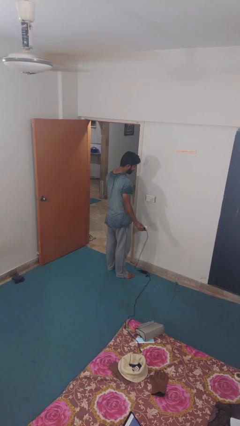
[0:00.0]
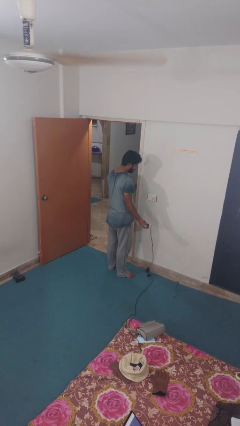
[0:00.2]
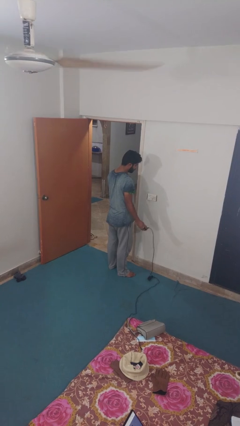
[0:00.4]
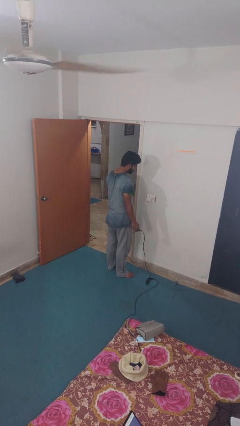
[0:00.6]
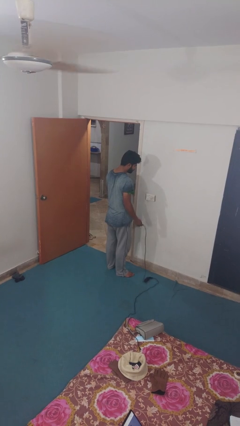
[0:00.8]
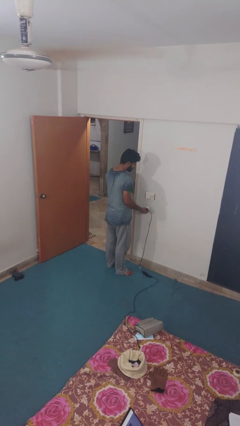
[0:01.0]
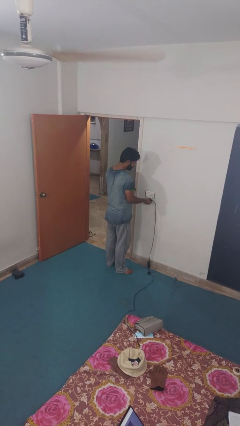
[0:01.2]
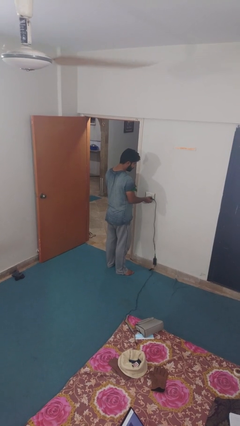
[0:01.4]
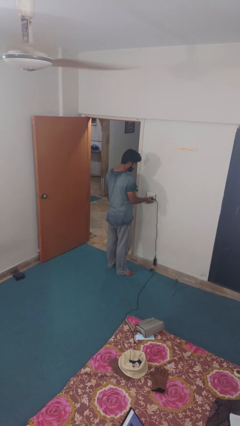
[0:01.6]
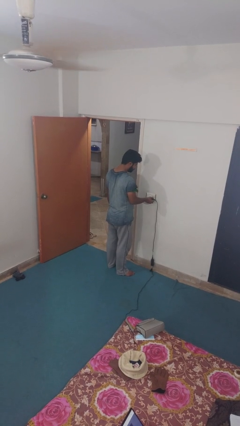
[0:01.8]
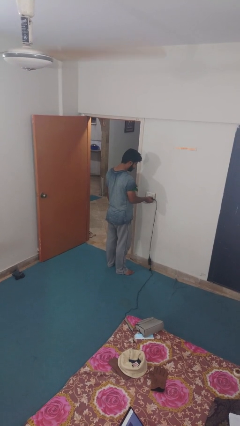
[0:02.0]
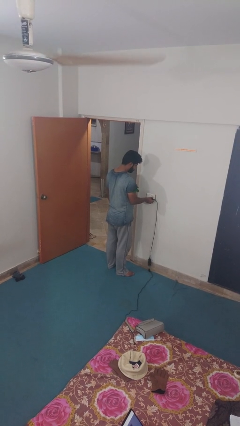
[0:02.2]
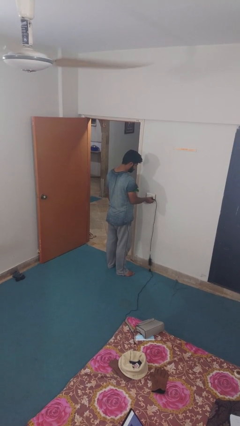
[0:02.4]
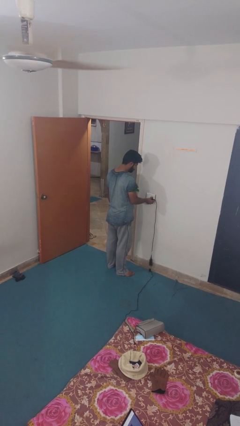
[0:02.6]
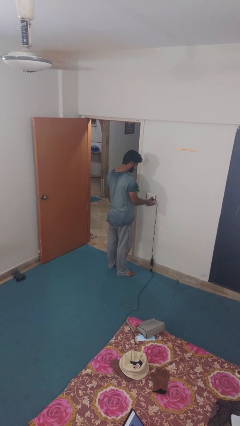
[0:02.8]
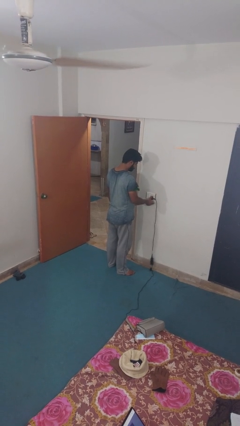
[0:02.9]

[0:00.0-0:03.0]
person plugs into electrical socket

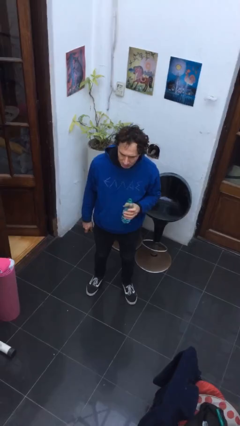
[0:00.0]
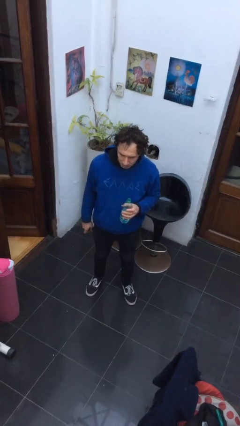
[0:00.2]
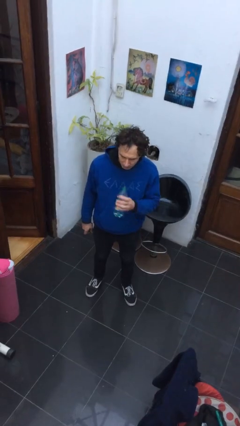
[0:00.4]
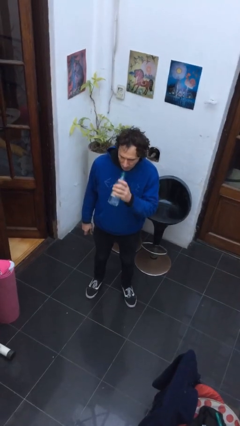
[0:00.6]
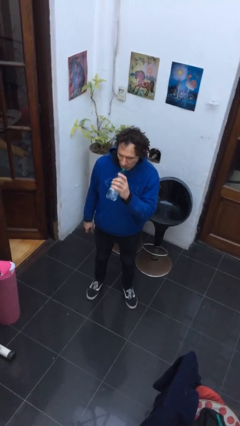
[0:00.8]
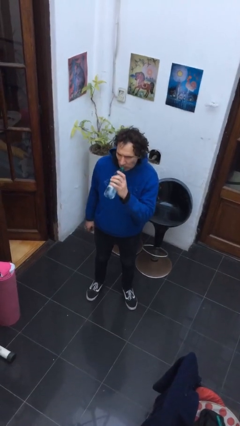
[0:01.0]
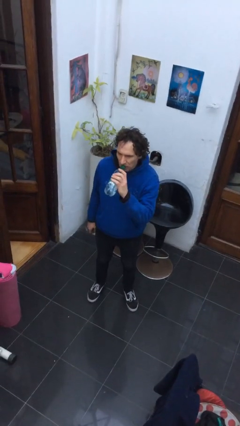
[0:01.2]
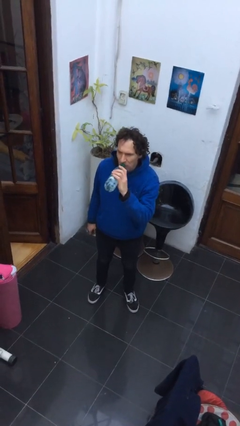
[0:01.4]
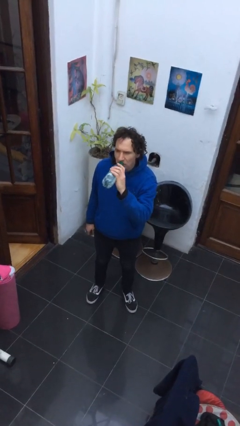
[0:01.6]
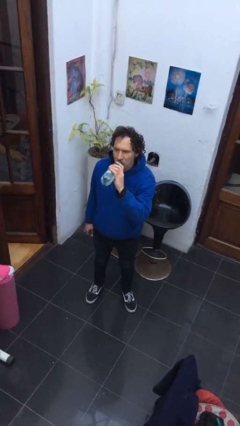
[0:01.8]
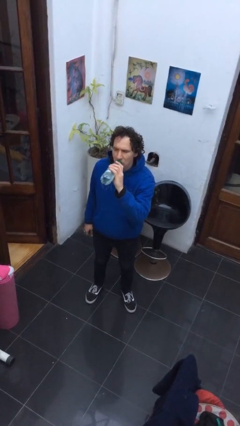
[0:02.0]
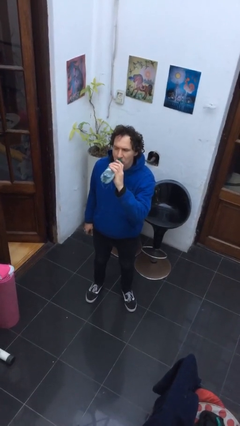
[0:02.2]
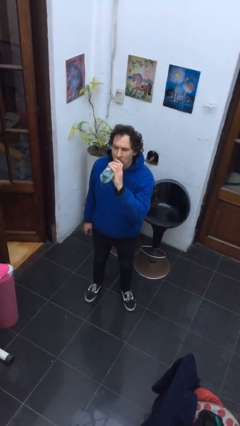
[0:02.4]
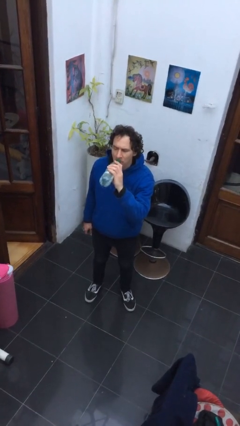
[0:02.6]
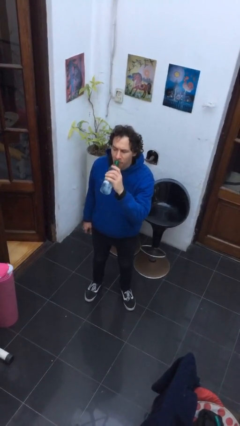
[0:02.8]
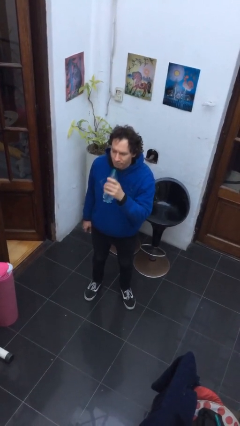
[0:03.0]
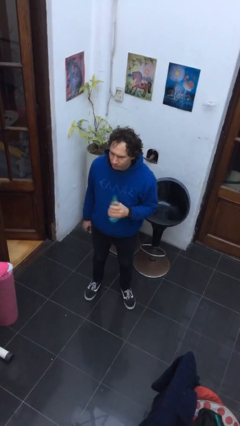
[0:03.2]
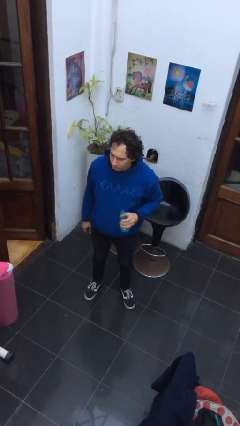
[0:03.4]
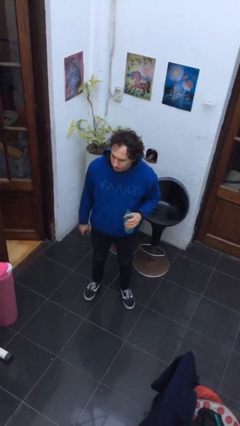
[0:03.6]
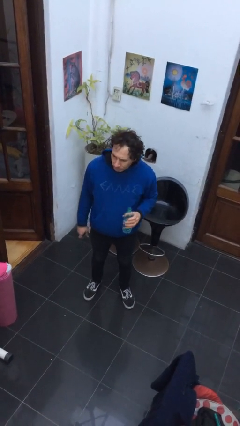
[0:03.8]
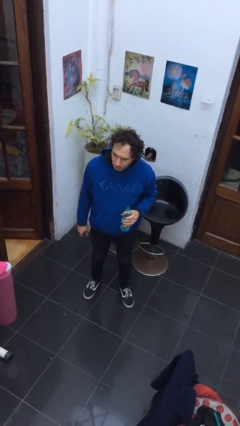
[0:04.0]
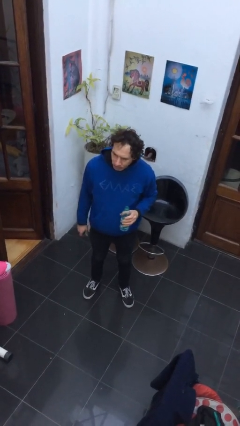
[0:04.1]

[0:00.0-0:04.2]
person drinks from bottle

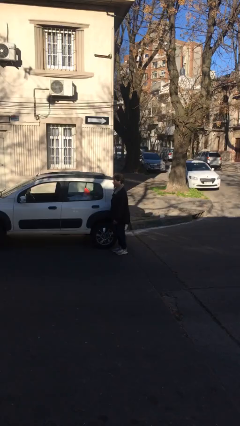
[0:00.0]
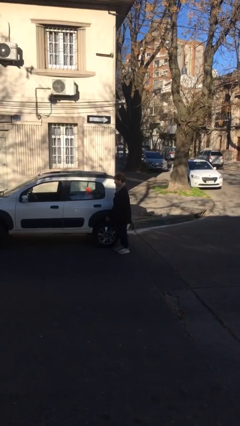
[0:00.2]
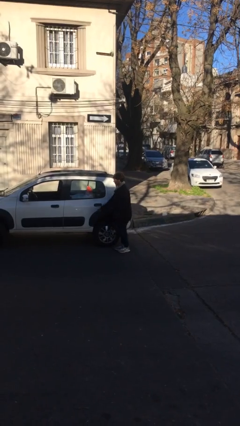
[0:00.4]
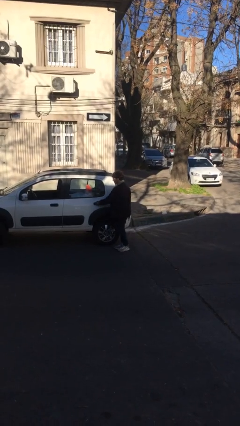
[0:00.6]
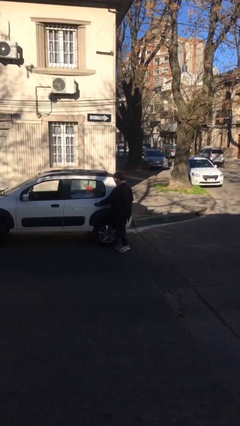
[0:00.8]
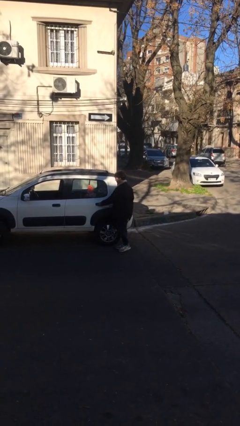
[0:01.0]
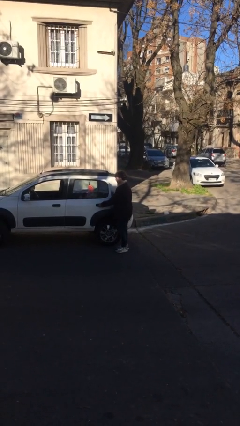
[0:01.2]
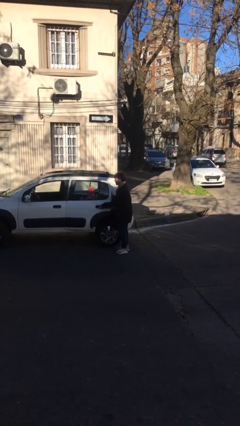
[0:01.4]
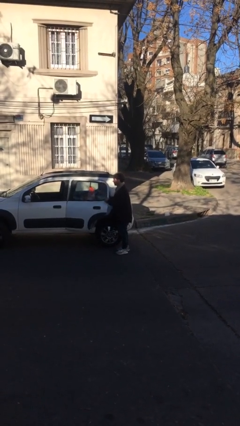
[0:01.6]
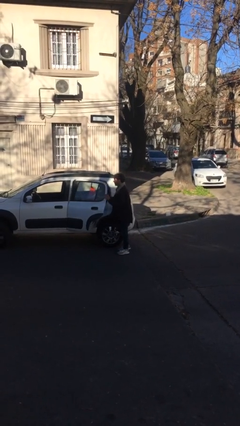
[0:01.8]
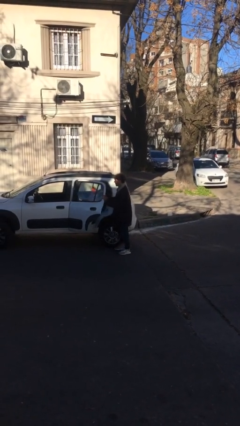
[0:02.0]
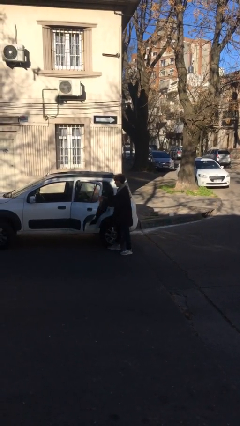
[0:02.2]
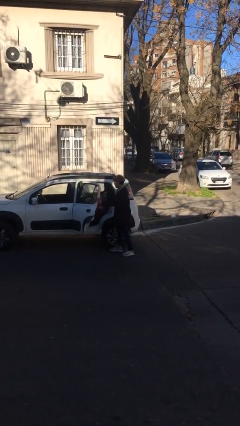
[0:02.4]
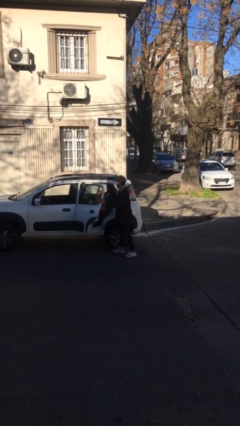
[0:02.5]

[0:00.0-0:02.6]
person opens car door

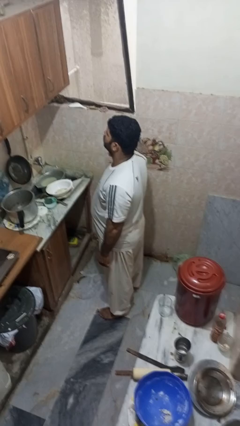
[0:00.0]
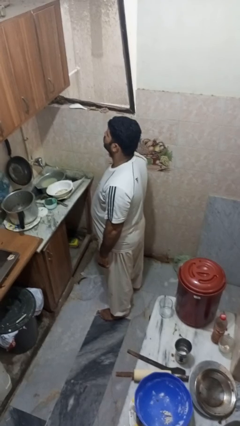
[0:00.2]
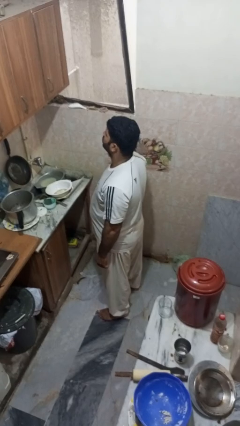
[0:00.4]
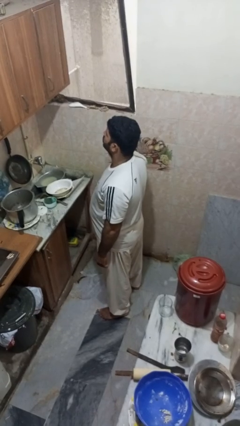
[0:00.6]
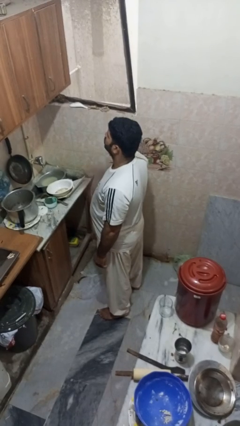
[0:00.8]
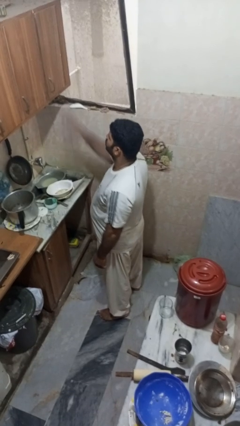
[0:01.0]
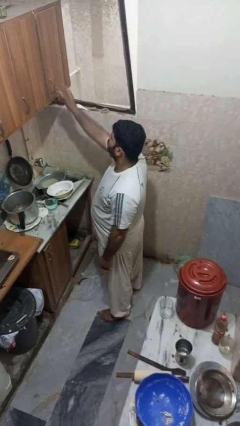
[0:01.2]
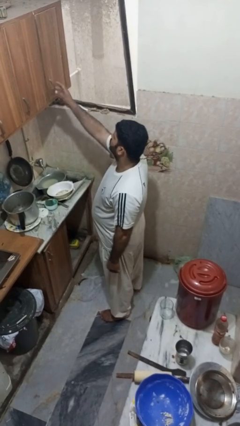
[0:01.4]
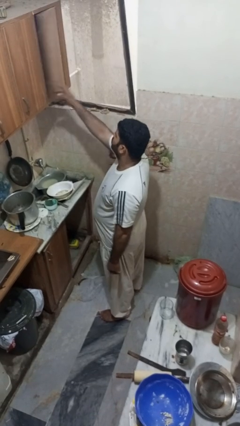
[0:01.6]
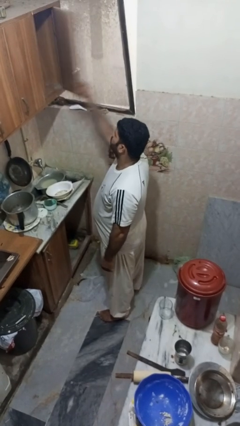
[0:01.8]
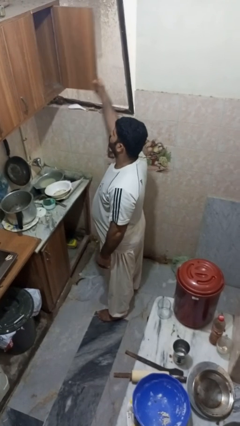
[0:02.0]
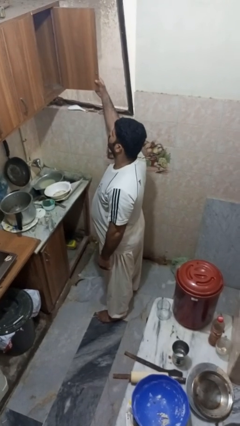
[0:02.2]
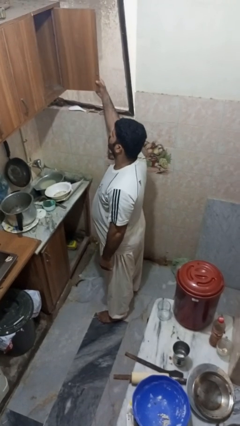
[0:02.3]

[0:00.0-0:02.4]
person opens cabinet

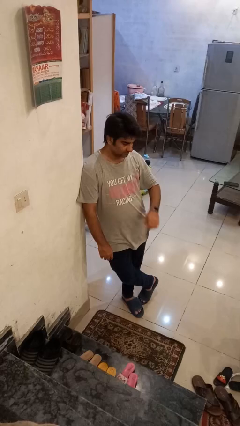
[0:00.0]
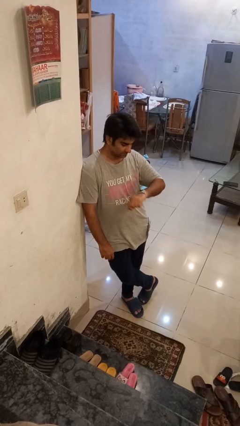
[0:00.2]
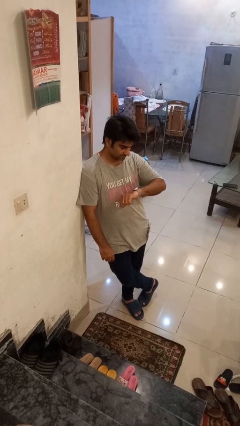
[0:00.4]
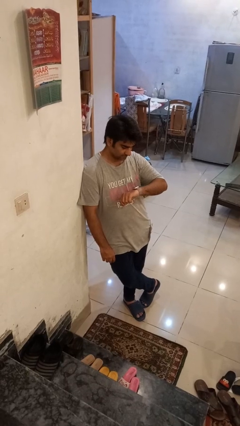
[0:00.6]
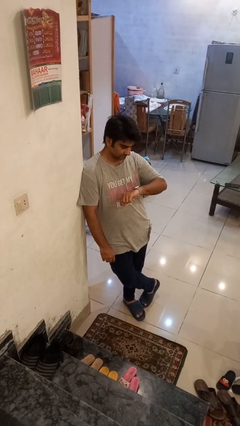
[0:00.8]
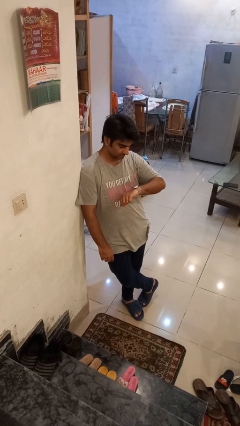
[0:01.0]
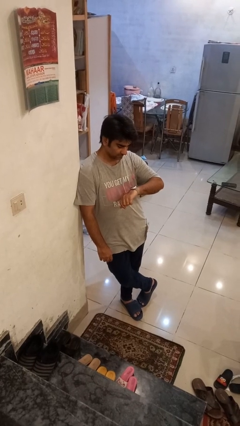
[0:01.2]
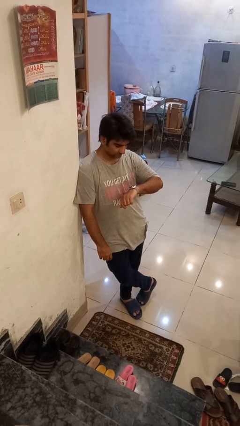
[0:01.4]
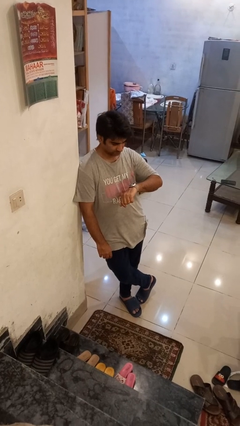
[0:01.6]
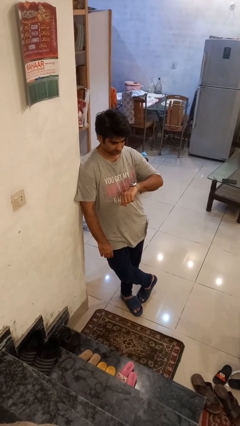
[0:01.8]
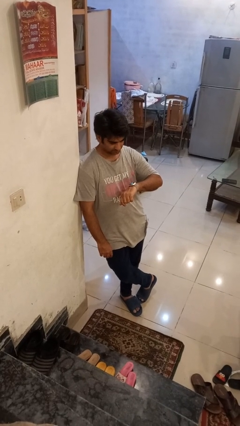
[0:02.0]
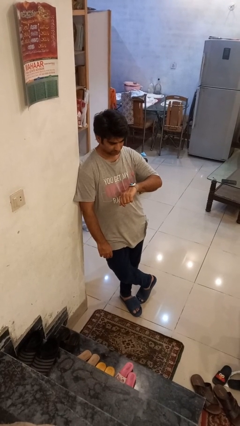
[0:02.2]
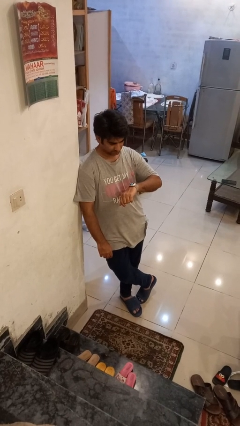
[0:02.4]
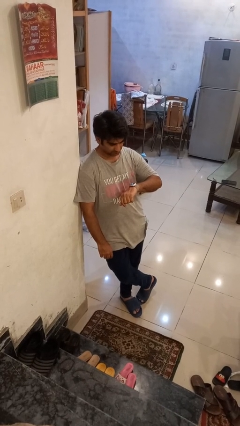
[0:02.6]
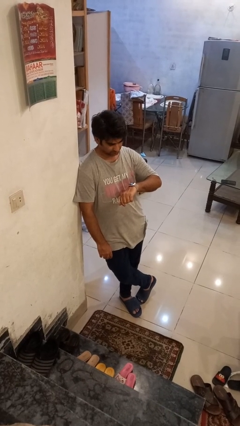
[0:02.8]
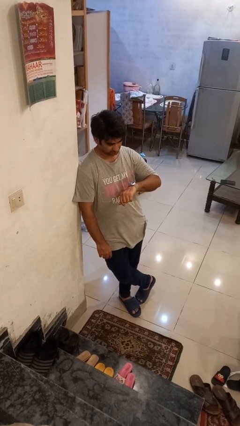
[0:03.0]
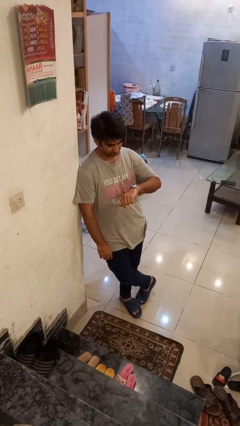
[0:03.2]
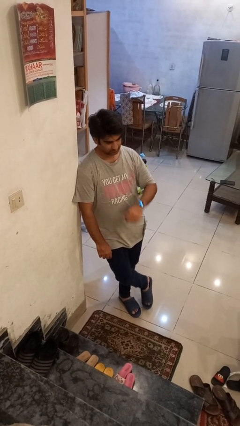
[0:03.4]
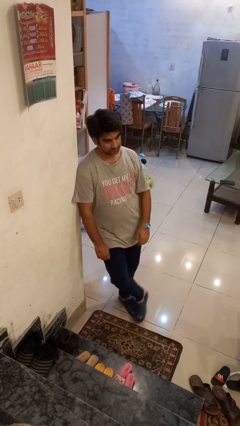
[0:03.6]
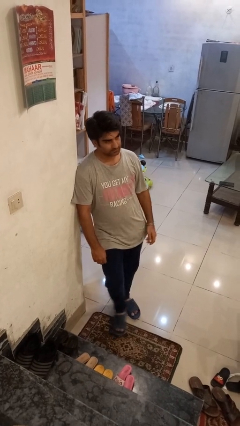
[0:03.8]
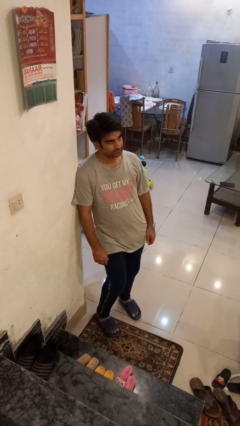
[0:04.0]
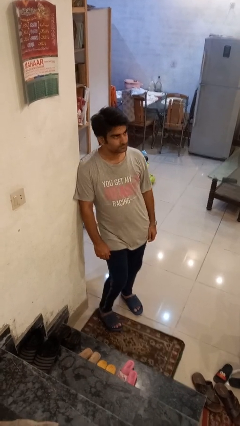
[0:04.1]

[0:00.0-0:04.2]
person looks at wristwatch

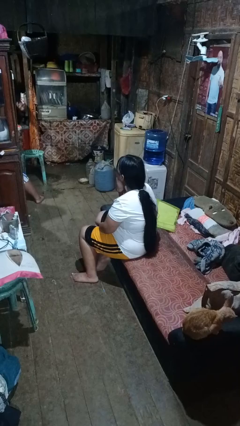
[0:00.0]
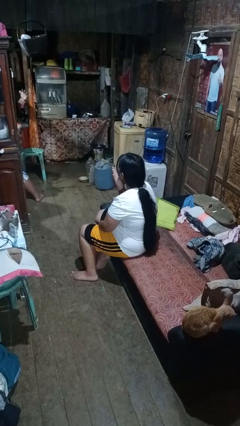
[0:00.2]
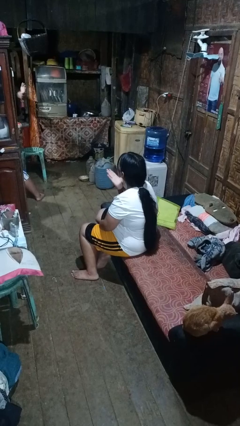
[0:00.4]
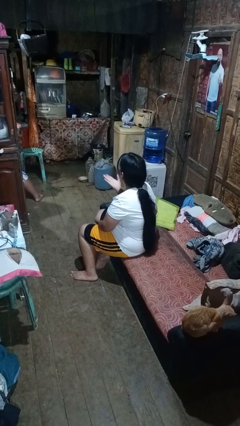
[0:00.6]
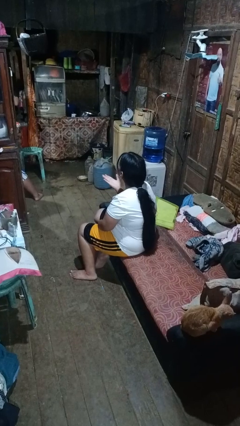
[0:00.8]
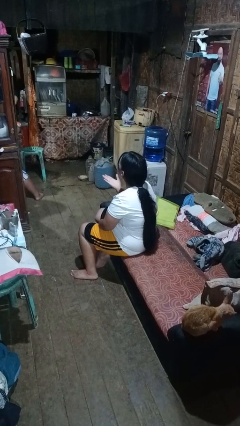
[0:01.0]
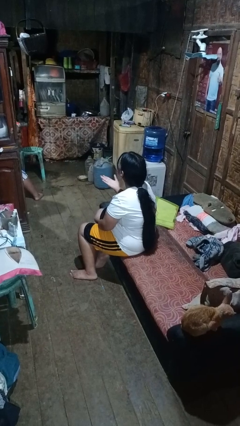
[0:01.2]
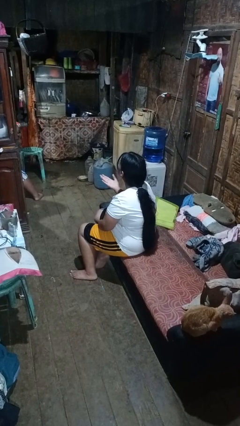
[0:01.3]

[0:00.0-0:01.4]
person gestures blow kiss
